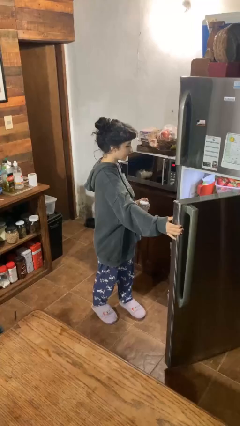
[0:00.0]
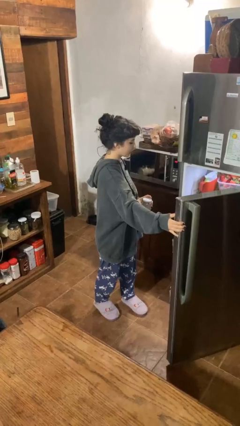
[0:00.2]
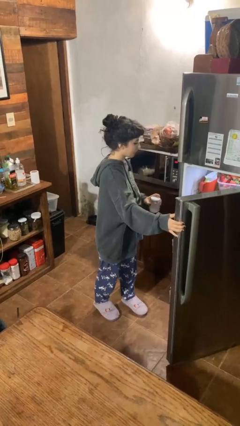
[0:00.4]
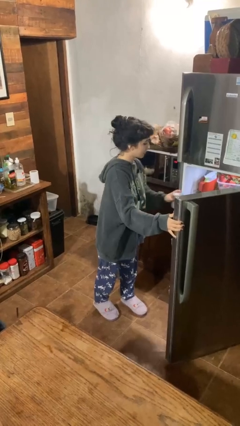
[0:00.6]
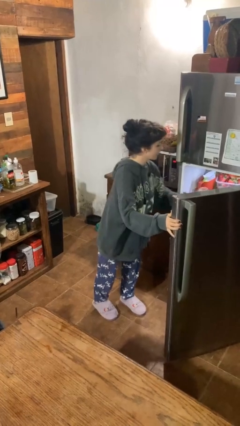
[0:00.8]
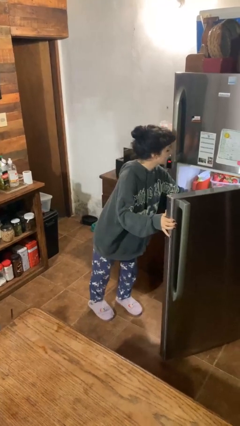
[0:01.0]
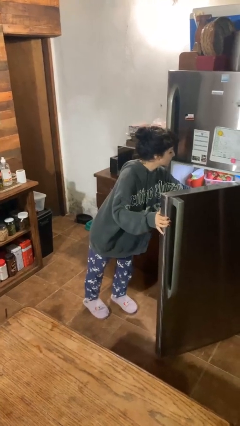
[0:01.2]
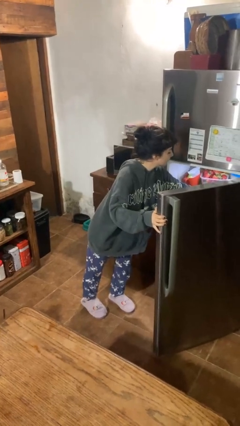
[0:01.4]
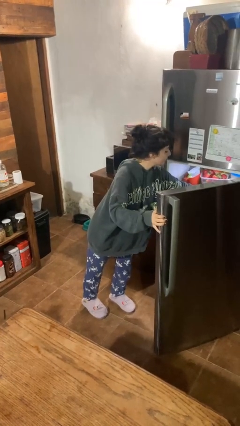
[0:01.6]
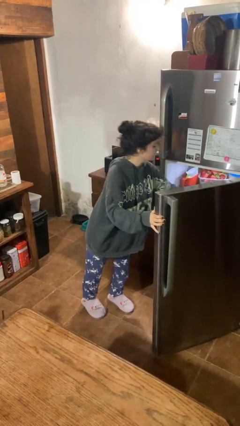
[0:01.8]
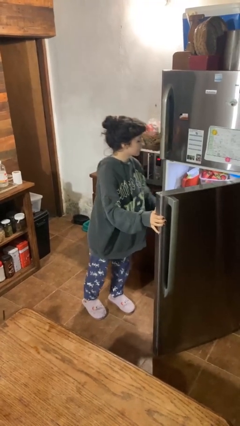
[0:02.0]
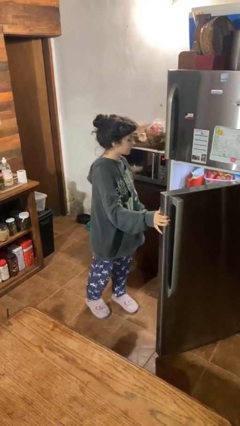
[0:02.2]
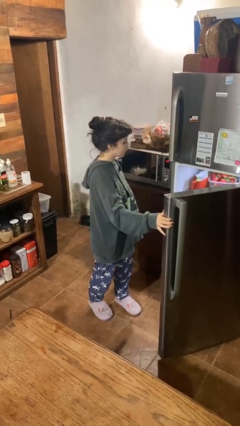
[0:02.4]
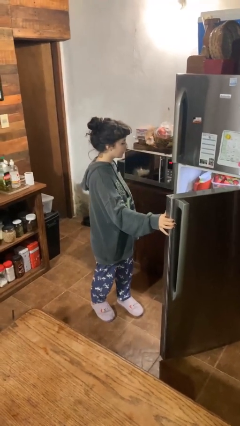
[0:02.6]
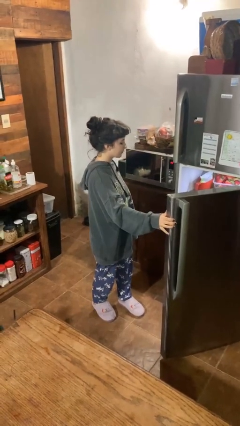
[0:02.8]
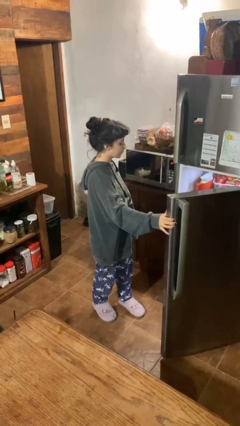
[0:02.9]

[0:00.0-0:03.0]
person puts object into refrigerator

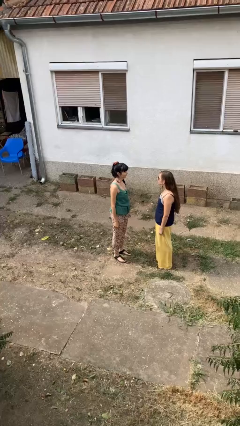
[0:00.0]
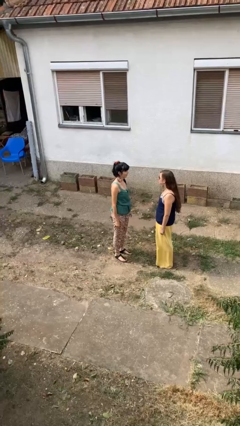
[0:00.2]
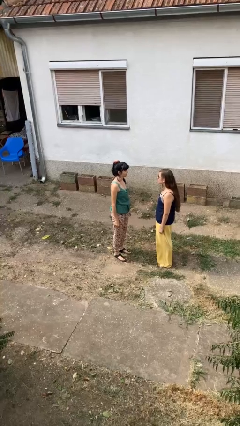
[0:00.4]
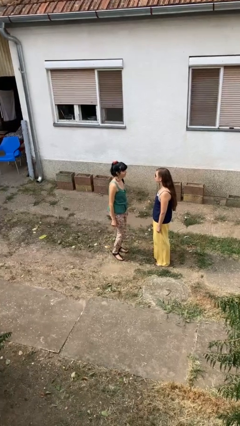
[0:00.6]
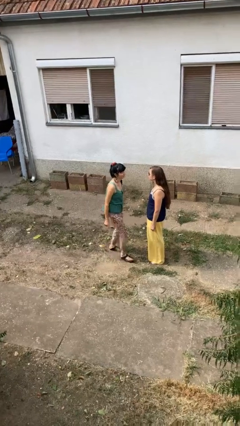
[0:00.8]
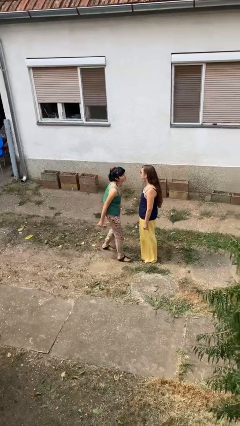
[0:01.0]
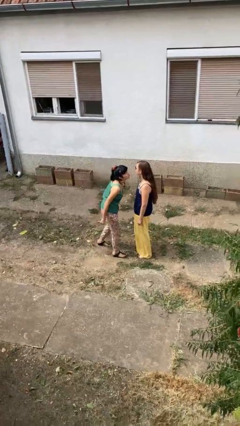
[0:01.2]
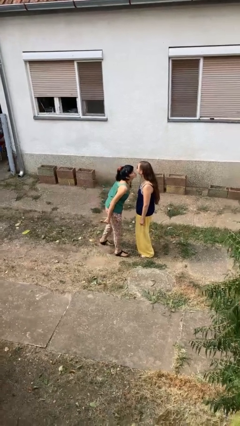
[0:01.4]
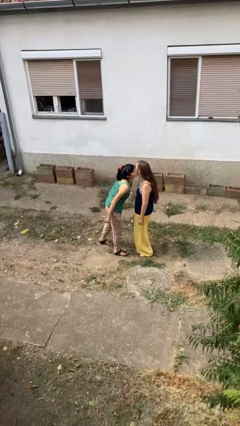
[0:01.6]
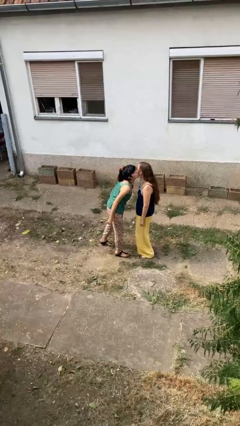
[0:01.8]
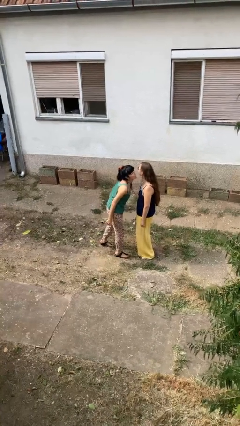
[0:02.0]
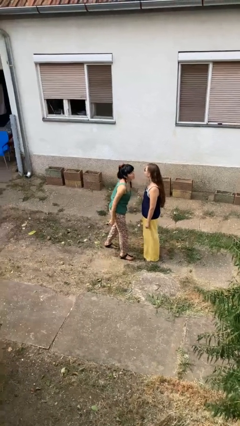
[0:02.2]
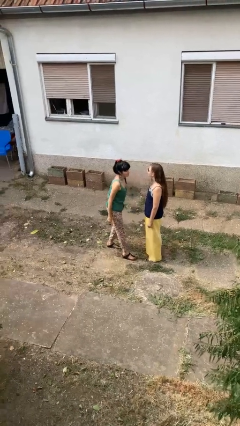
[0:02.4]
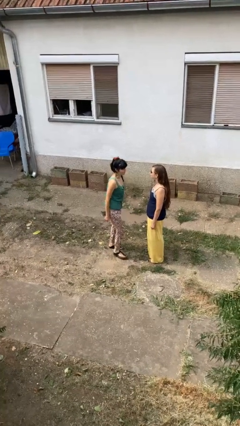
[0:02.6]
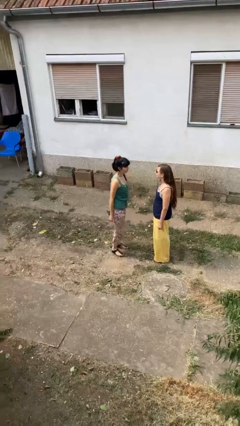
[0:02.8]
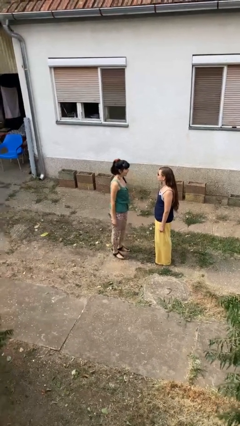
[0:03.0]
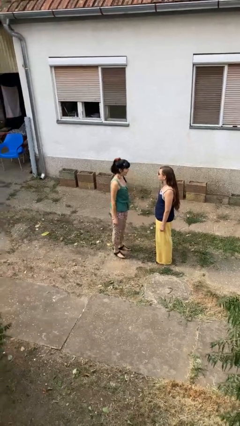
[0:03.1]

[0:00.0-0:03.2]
person kisses cheek of person

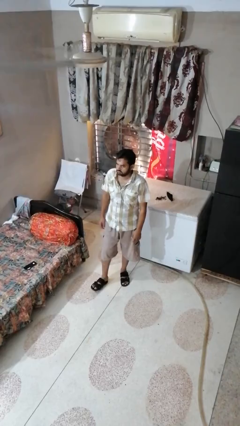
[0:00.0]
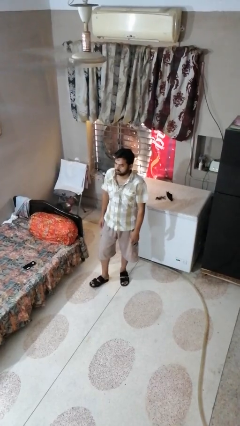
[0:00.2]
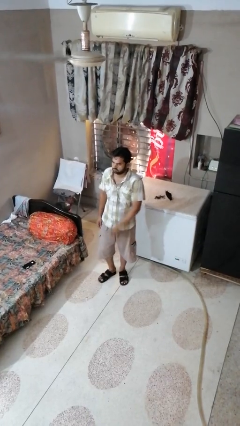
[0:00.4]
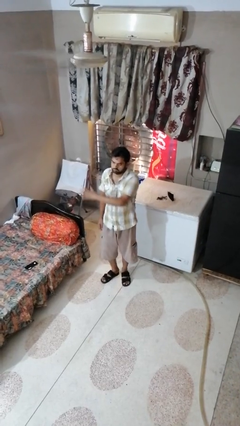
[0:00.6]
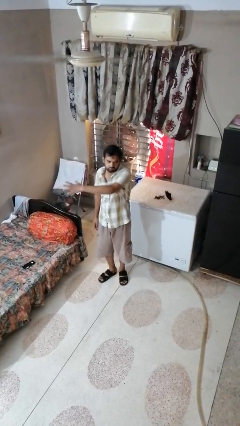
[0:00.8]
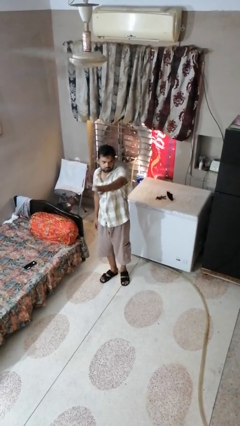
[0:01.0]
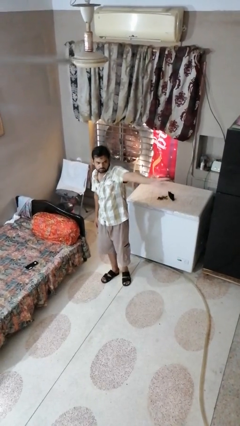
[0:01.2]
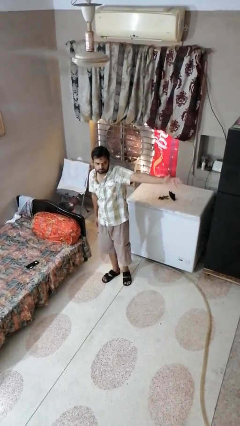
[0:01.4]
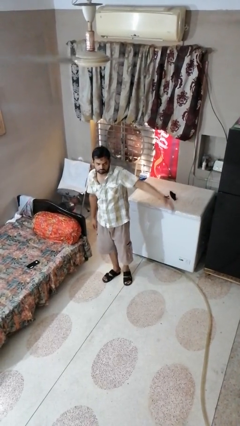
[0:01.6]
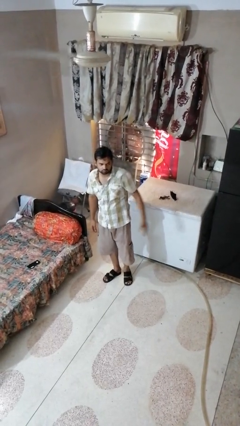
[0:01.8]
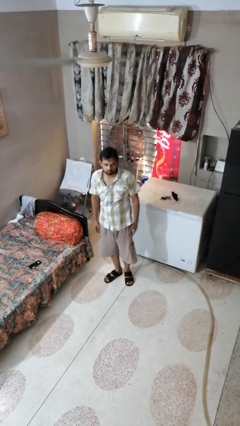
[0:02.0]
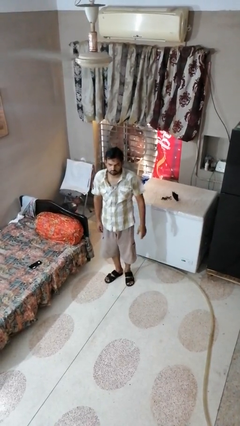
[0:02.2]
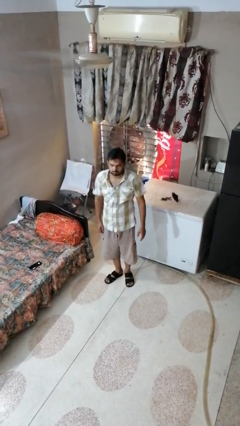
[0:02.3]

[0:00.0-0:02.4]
person gestures swipe left

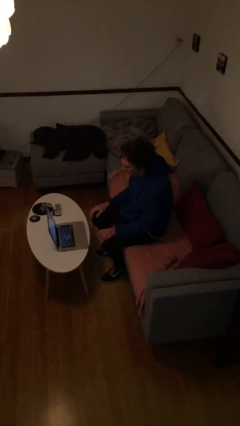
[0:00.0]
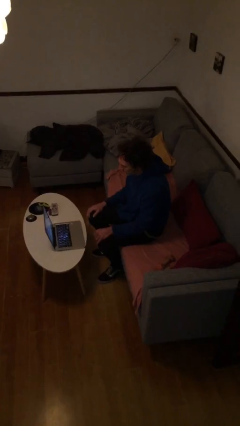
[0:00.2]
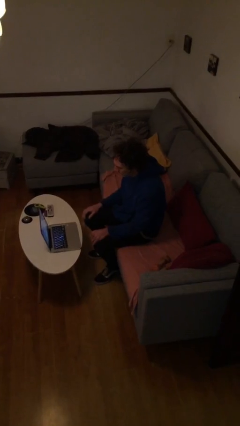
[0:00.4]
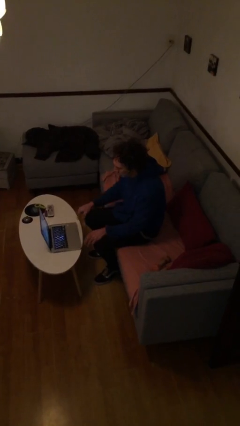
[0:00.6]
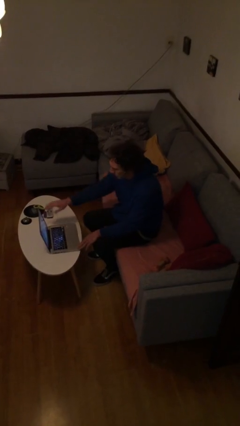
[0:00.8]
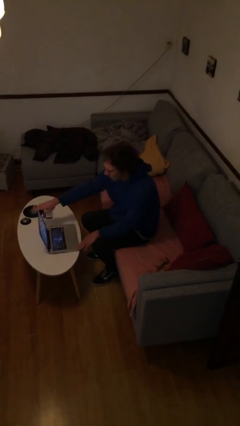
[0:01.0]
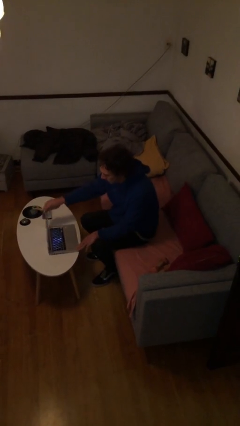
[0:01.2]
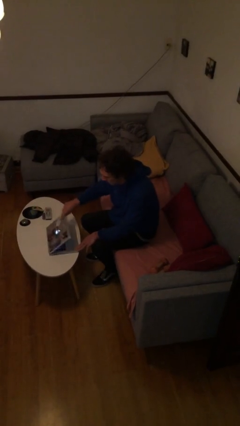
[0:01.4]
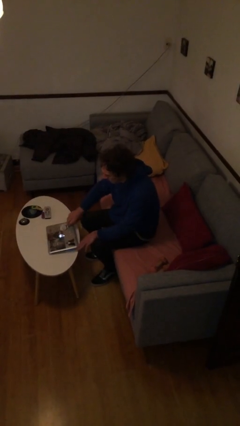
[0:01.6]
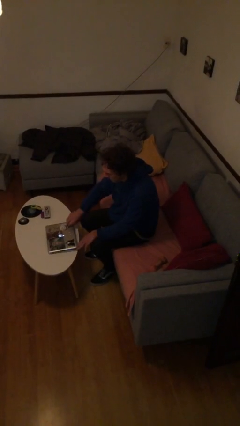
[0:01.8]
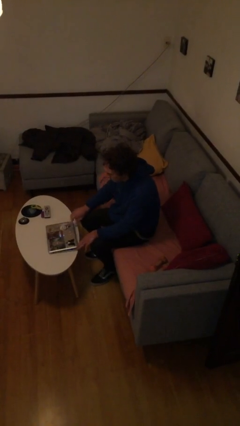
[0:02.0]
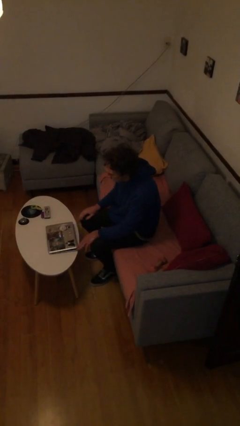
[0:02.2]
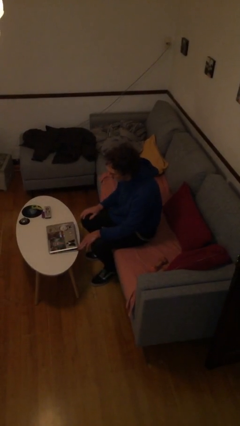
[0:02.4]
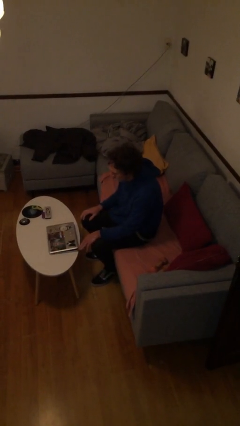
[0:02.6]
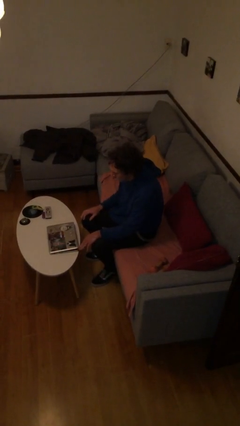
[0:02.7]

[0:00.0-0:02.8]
person closes laptop

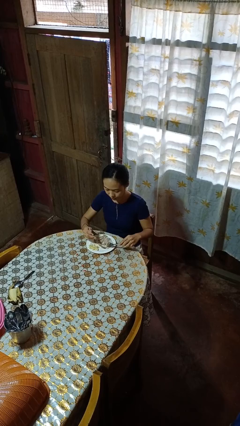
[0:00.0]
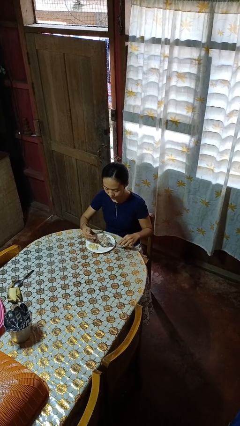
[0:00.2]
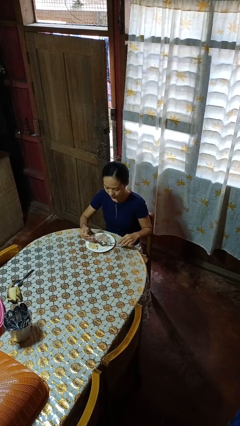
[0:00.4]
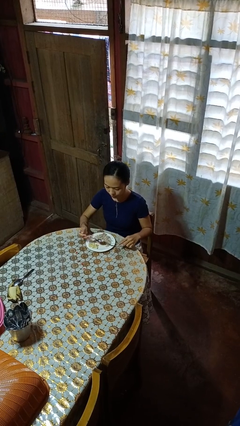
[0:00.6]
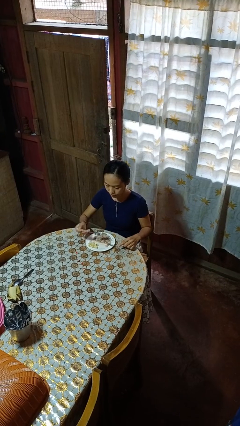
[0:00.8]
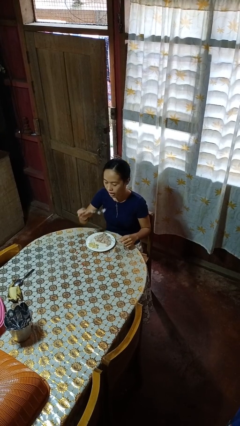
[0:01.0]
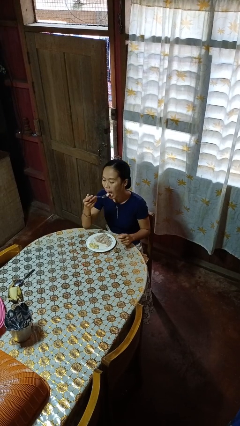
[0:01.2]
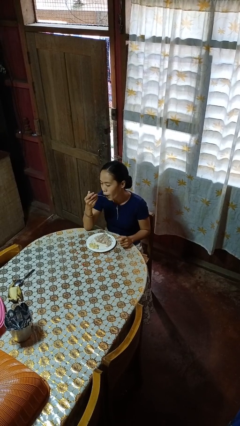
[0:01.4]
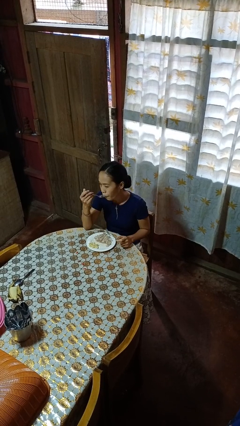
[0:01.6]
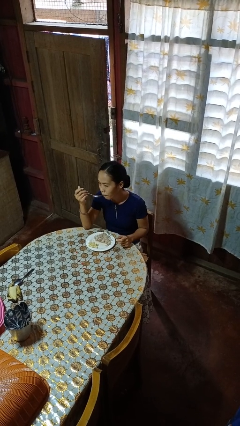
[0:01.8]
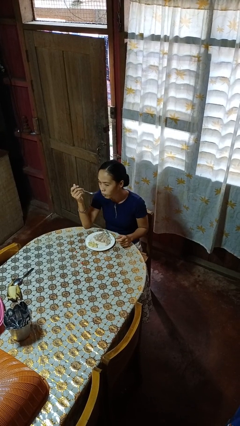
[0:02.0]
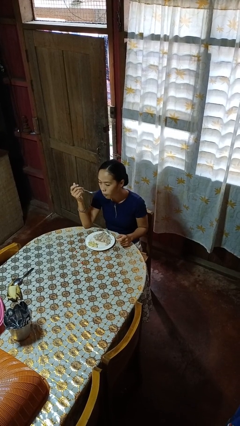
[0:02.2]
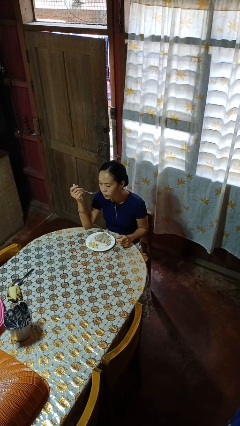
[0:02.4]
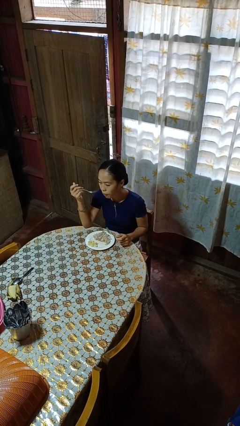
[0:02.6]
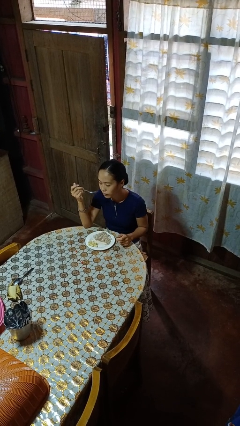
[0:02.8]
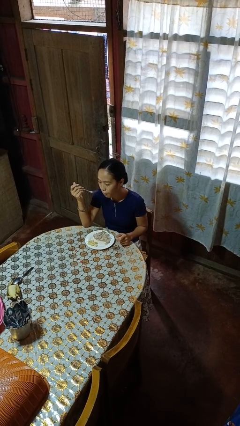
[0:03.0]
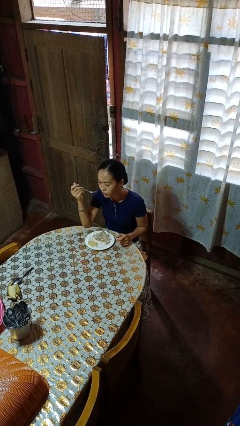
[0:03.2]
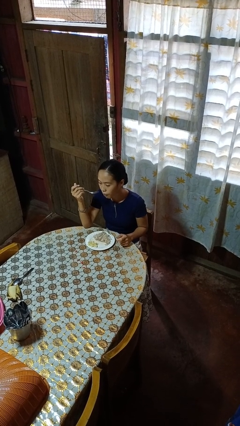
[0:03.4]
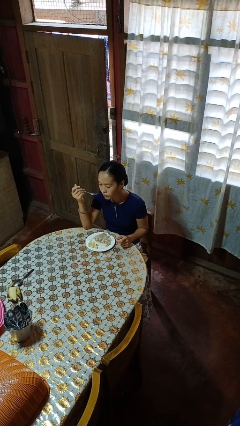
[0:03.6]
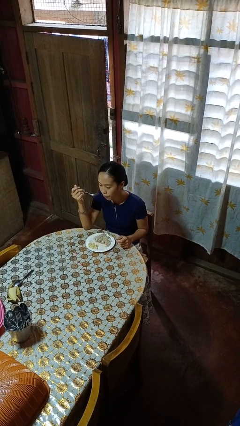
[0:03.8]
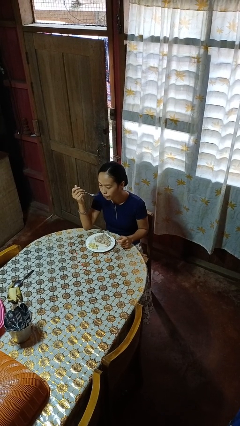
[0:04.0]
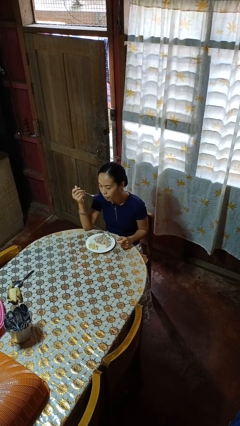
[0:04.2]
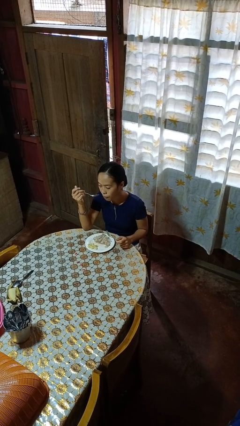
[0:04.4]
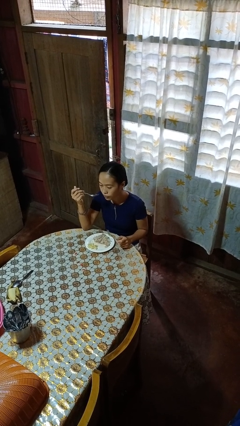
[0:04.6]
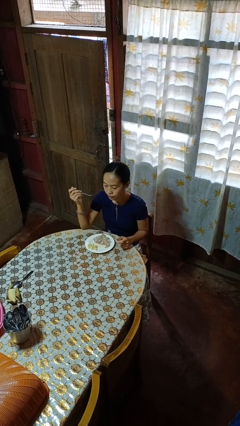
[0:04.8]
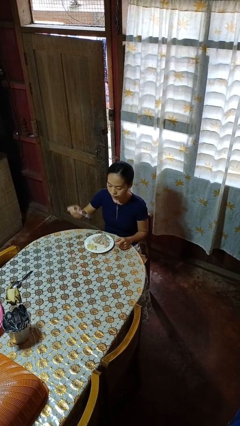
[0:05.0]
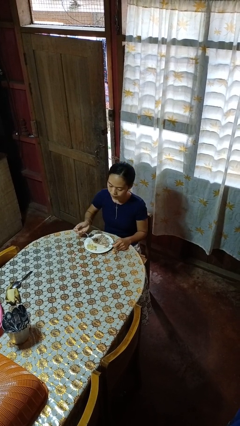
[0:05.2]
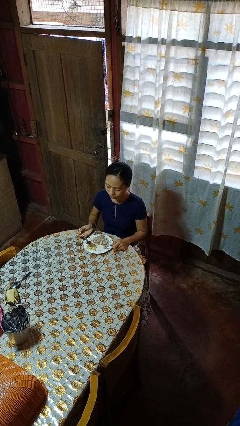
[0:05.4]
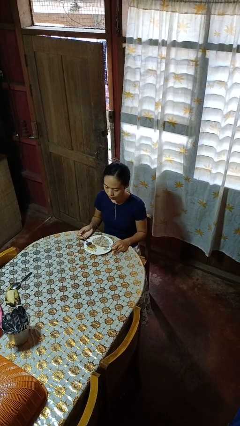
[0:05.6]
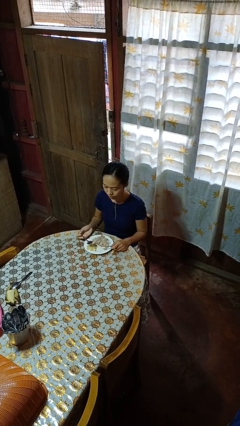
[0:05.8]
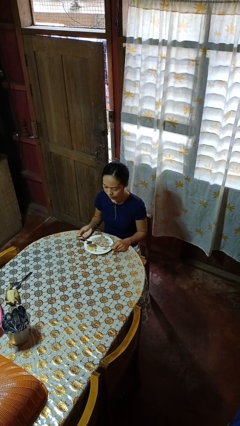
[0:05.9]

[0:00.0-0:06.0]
person eats with utensil
